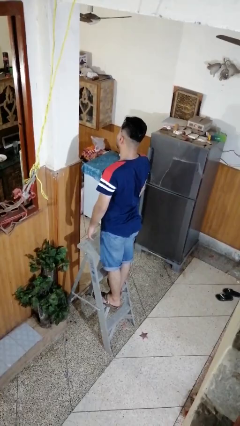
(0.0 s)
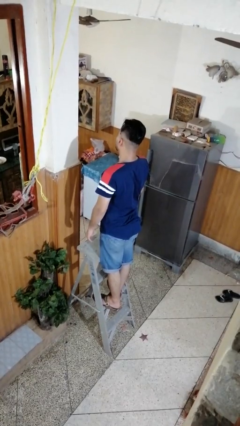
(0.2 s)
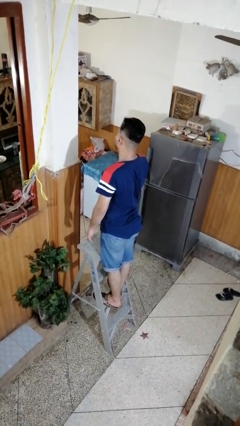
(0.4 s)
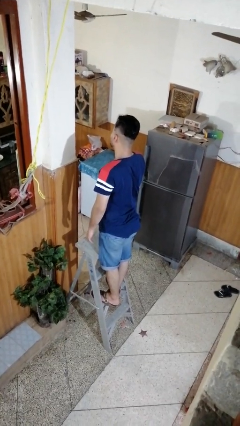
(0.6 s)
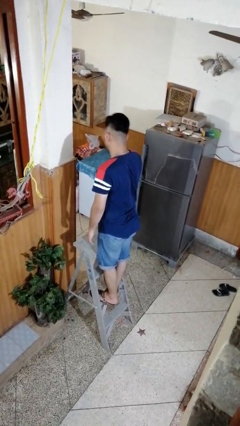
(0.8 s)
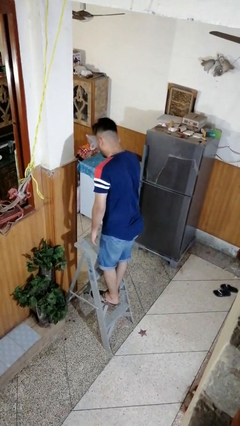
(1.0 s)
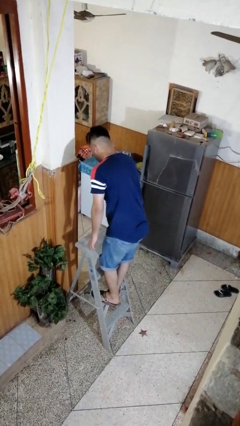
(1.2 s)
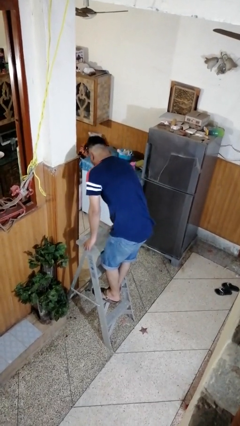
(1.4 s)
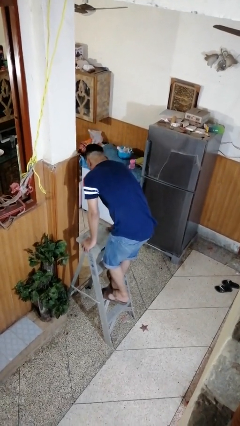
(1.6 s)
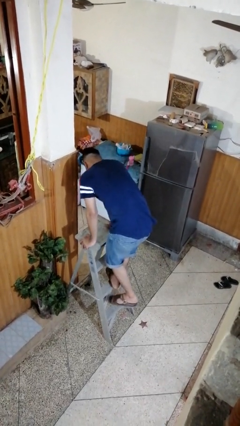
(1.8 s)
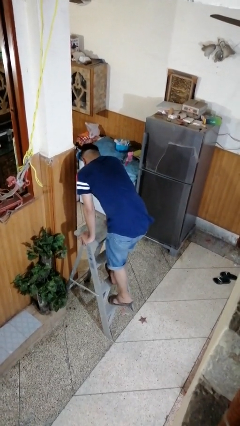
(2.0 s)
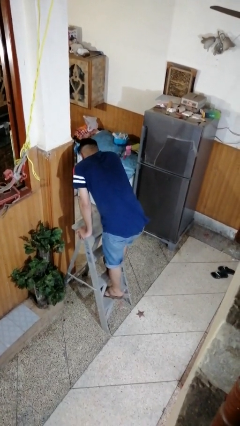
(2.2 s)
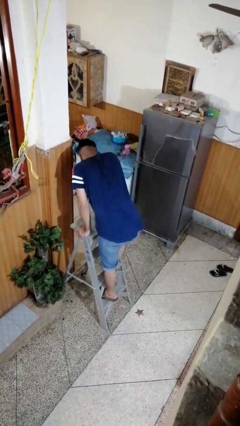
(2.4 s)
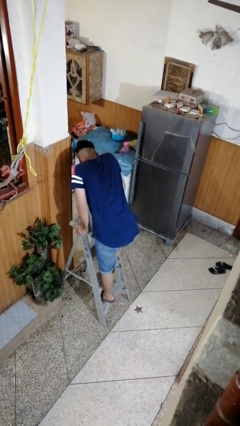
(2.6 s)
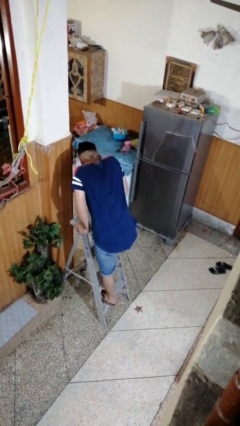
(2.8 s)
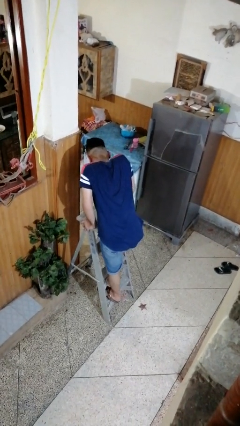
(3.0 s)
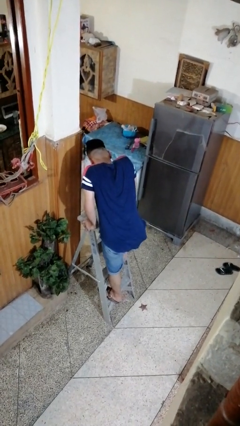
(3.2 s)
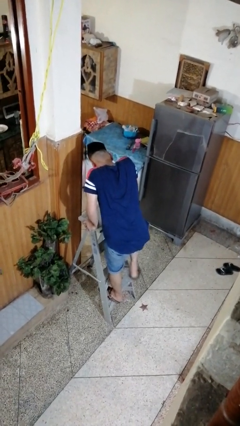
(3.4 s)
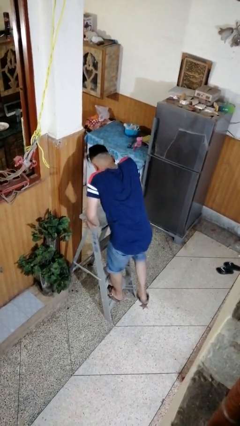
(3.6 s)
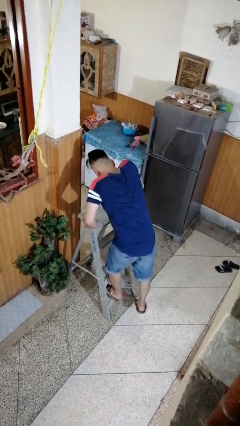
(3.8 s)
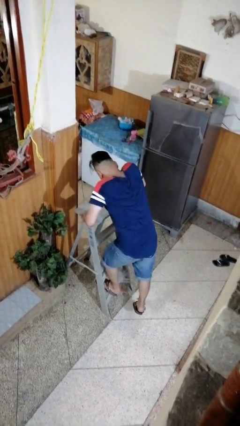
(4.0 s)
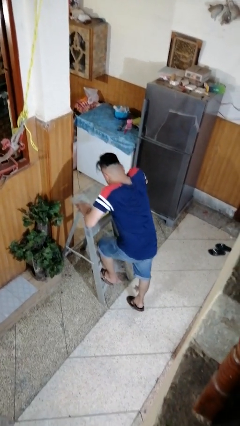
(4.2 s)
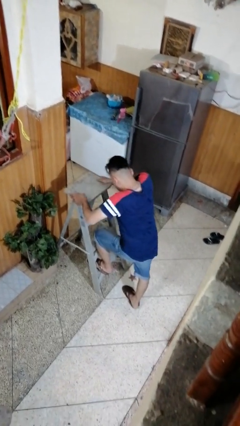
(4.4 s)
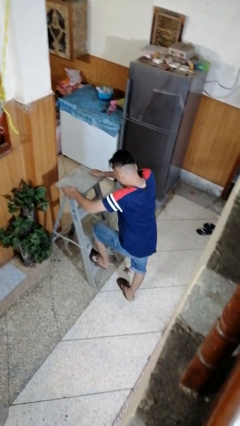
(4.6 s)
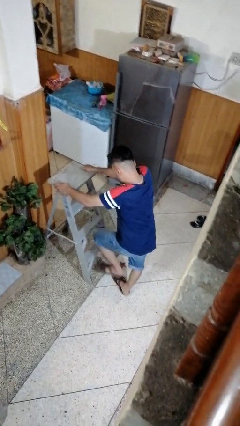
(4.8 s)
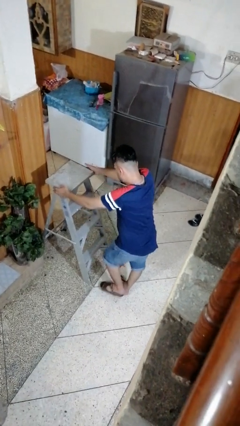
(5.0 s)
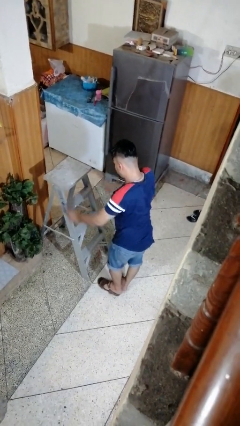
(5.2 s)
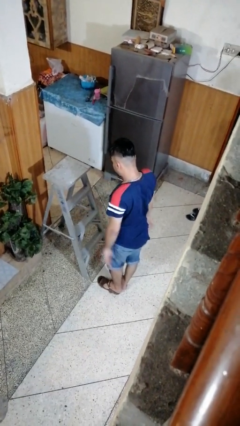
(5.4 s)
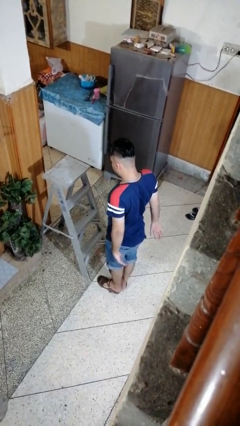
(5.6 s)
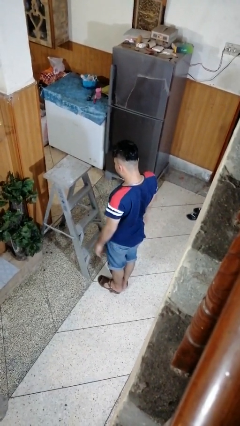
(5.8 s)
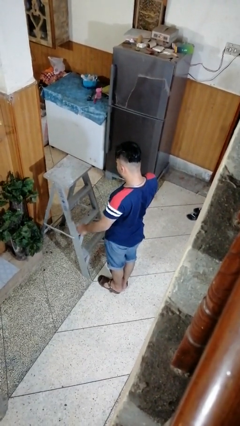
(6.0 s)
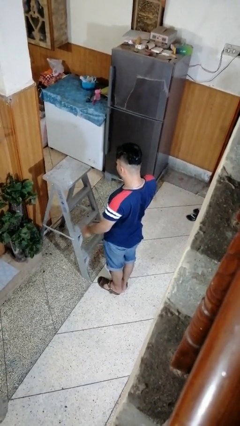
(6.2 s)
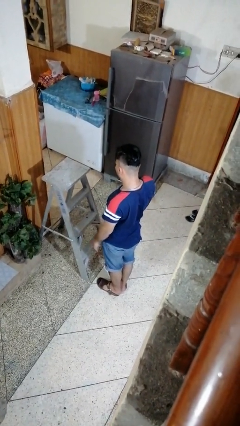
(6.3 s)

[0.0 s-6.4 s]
person climbs down ladder

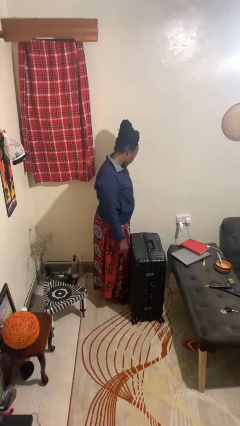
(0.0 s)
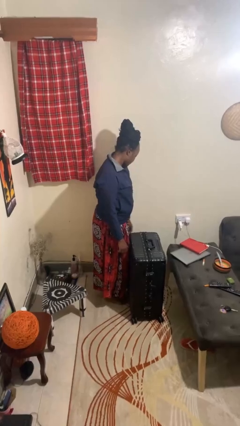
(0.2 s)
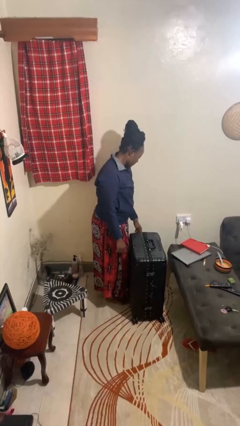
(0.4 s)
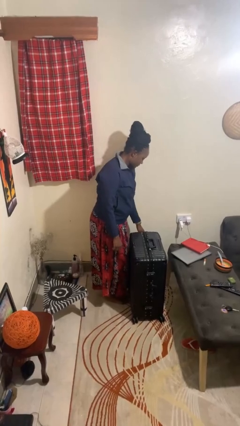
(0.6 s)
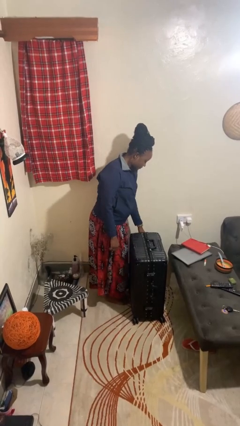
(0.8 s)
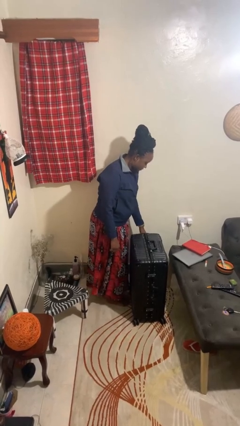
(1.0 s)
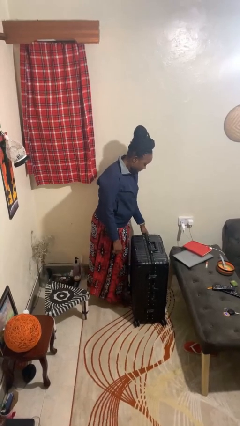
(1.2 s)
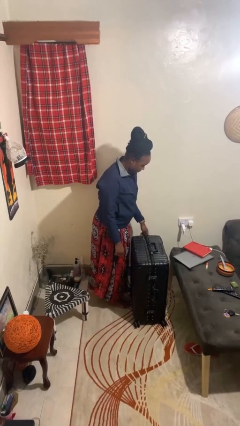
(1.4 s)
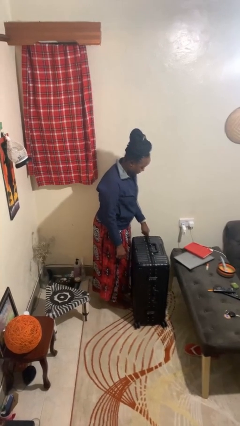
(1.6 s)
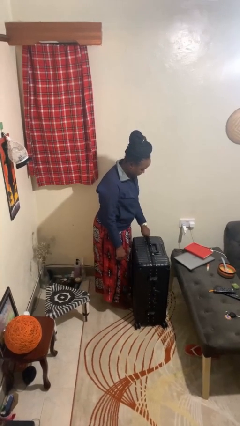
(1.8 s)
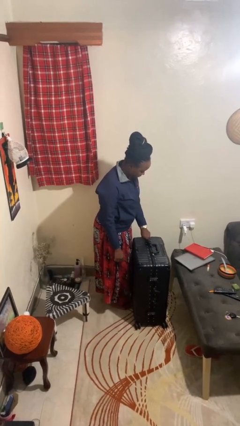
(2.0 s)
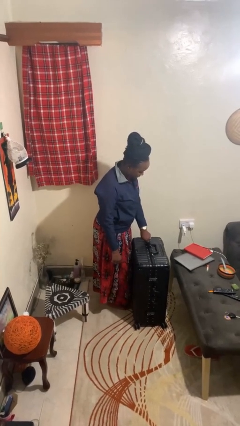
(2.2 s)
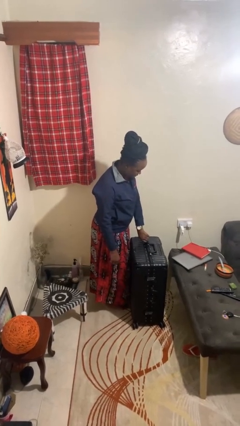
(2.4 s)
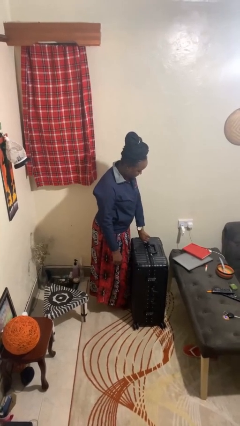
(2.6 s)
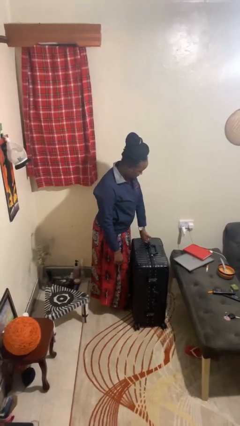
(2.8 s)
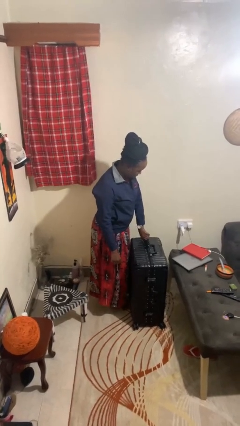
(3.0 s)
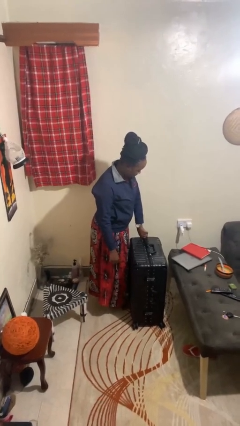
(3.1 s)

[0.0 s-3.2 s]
person opens suitcase

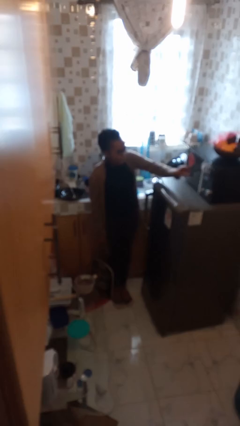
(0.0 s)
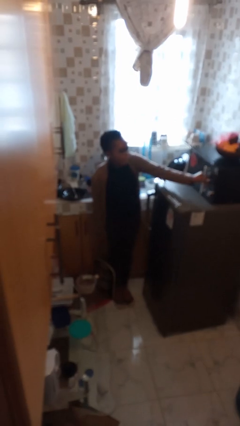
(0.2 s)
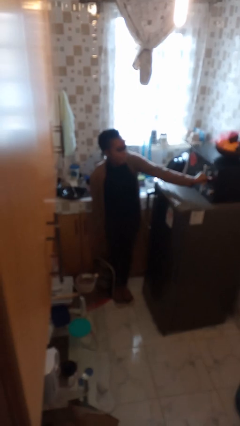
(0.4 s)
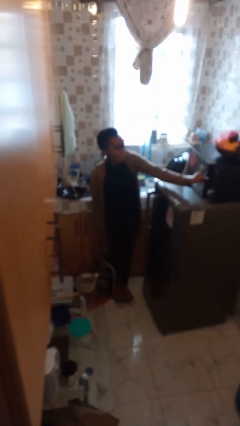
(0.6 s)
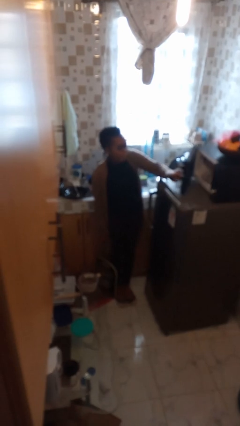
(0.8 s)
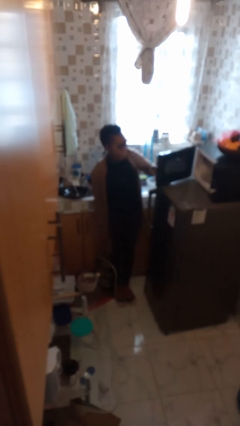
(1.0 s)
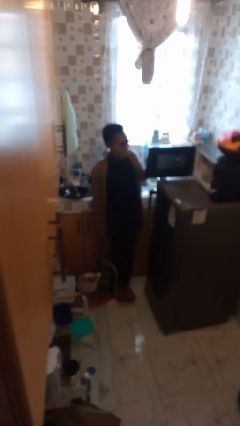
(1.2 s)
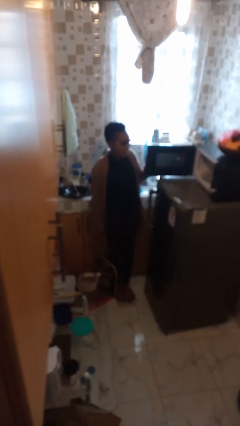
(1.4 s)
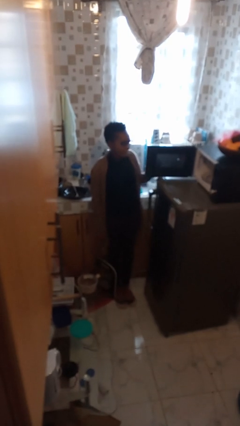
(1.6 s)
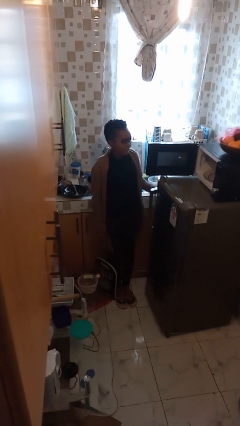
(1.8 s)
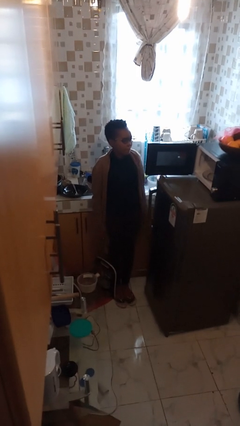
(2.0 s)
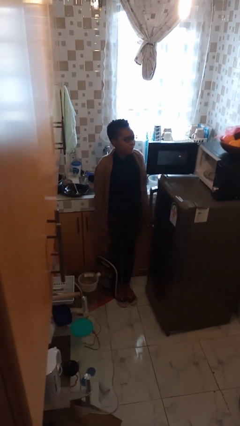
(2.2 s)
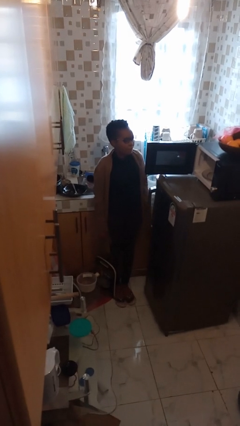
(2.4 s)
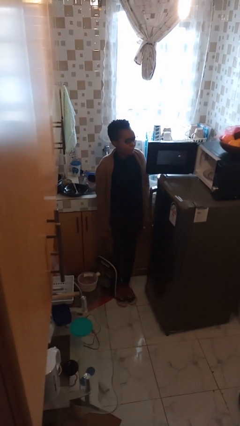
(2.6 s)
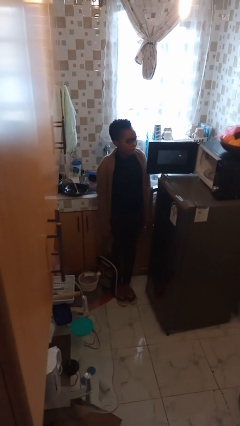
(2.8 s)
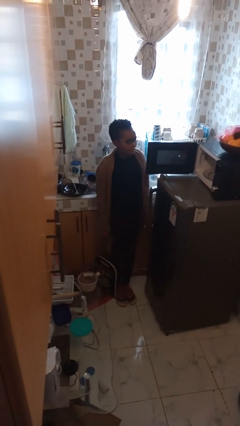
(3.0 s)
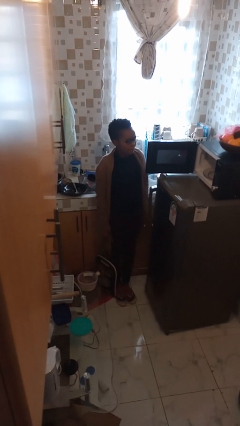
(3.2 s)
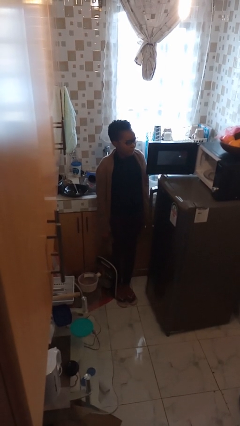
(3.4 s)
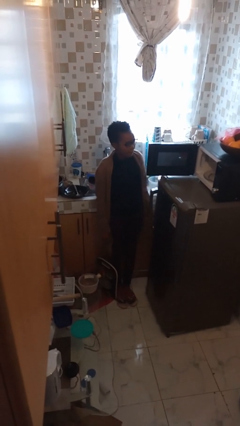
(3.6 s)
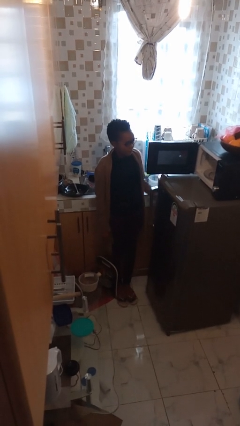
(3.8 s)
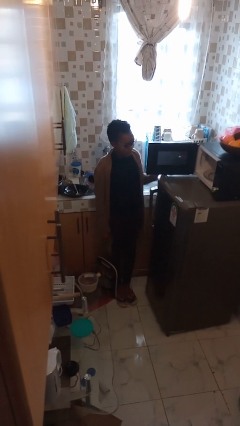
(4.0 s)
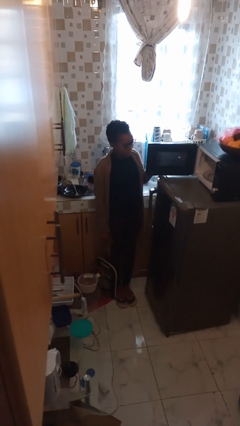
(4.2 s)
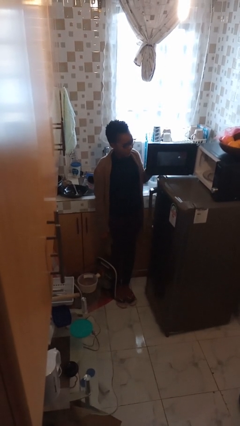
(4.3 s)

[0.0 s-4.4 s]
person opens microwave

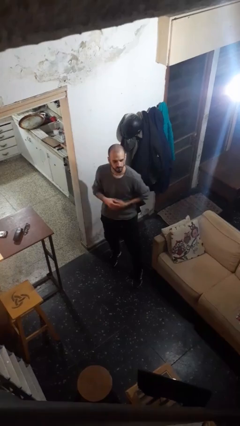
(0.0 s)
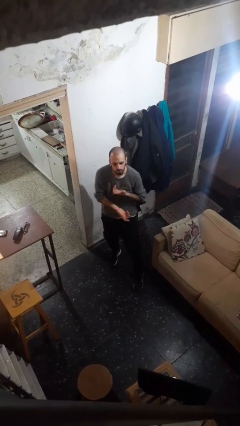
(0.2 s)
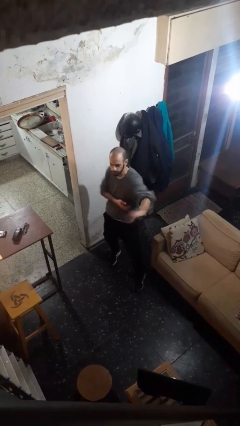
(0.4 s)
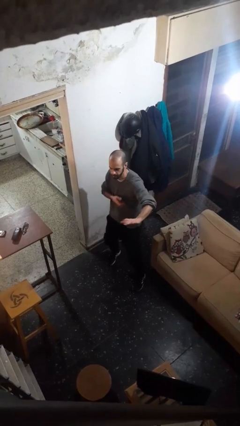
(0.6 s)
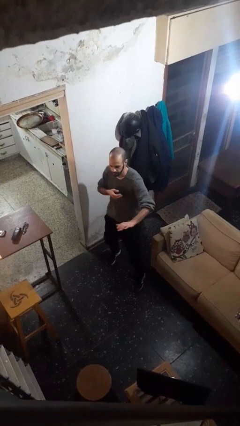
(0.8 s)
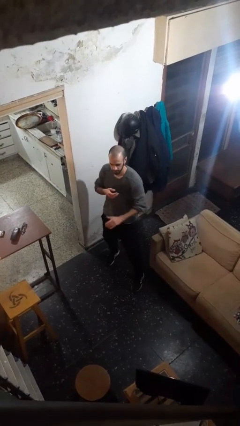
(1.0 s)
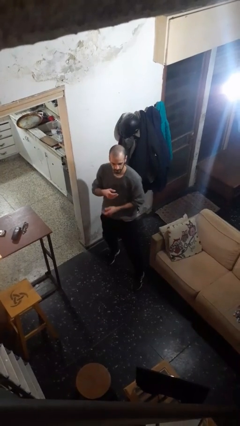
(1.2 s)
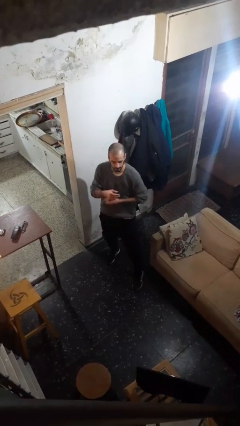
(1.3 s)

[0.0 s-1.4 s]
person karate chop

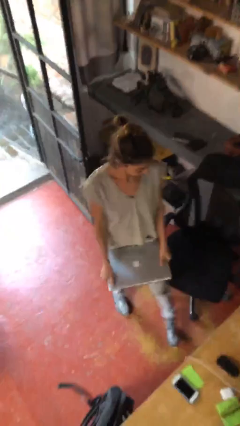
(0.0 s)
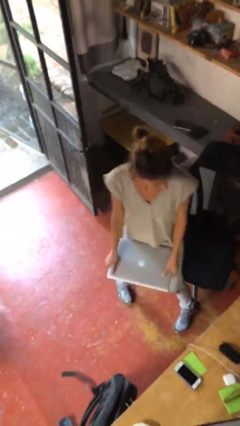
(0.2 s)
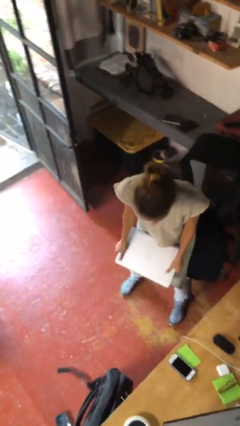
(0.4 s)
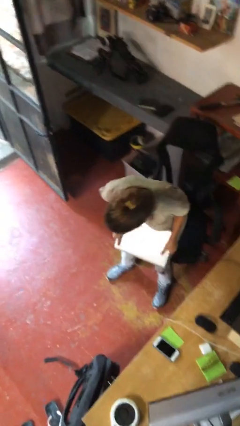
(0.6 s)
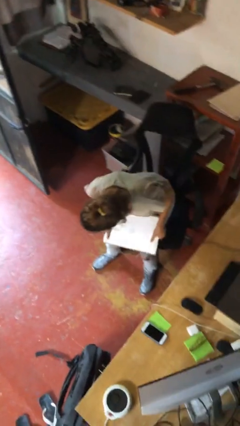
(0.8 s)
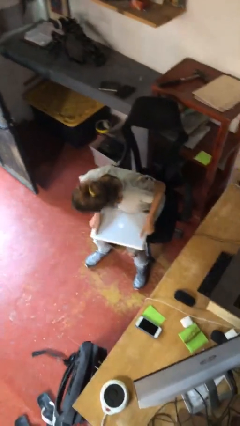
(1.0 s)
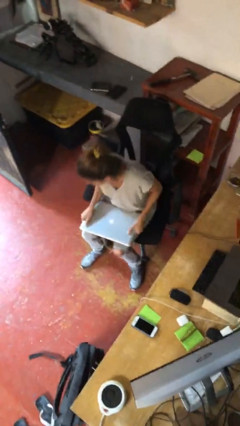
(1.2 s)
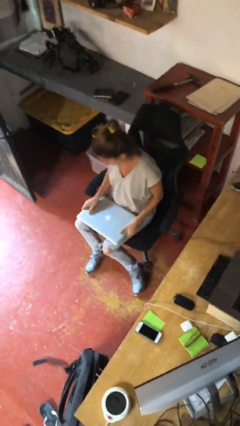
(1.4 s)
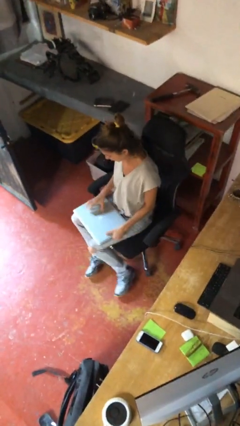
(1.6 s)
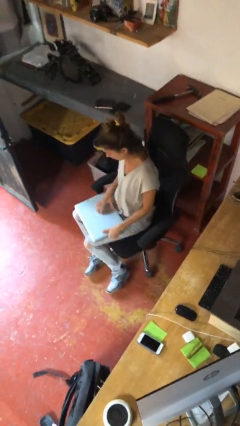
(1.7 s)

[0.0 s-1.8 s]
person sits down

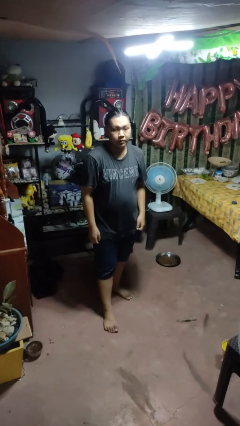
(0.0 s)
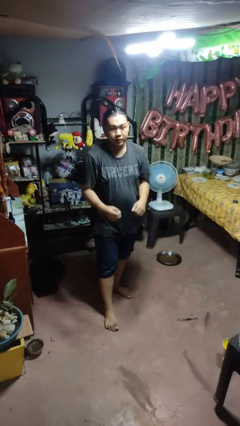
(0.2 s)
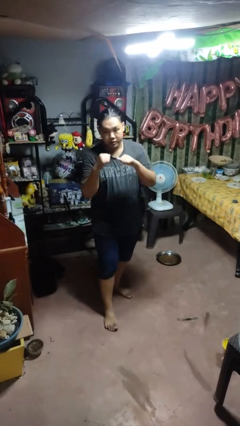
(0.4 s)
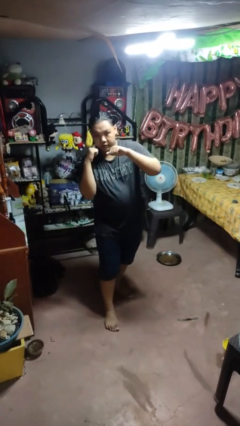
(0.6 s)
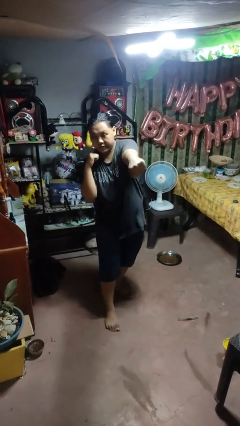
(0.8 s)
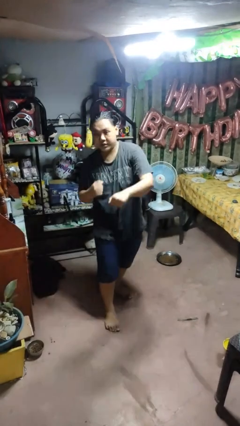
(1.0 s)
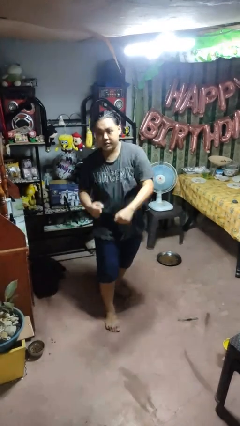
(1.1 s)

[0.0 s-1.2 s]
person punches
